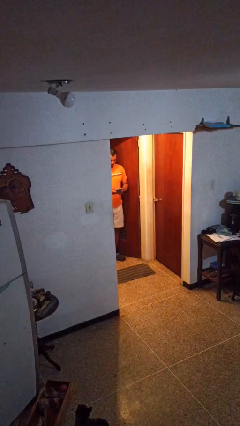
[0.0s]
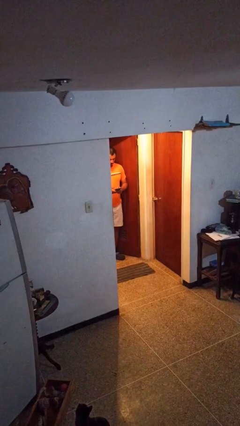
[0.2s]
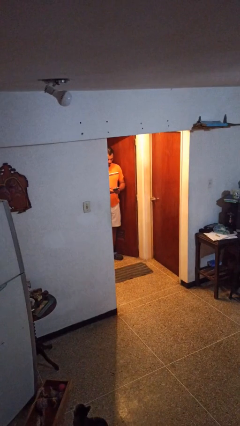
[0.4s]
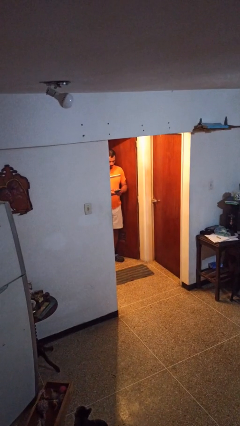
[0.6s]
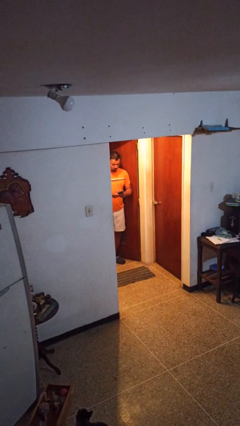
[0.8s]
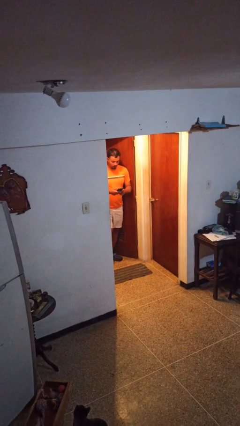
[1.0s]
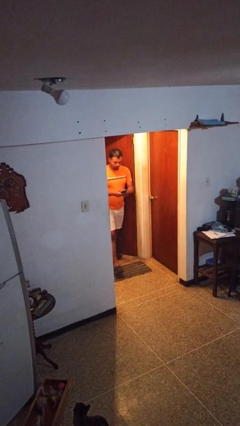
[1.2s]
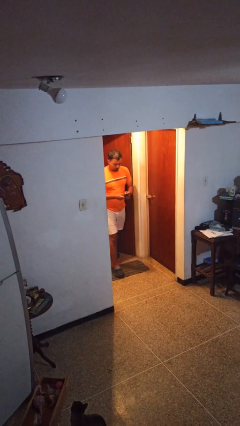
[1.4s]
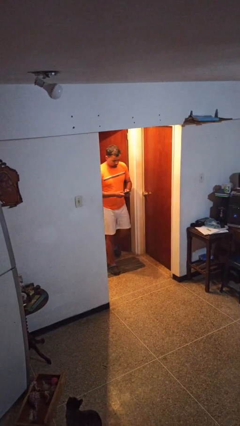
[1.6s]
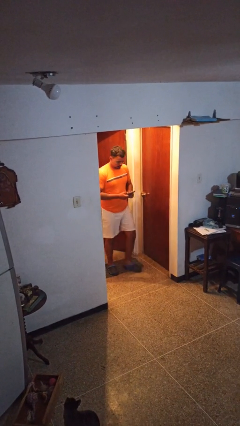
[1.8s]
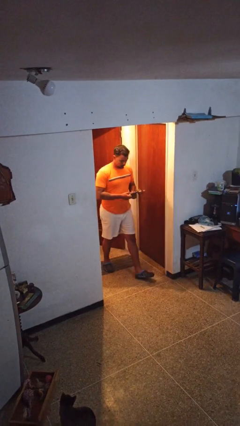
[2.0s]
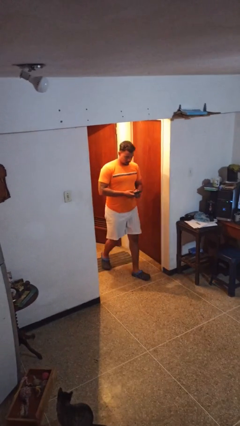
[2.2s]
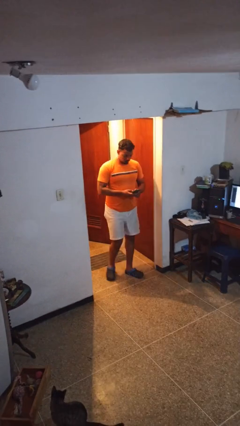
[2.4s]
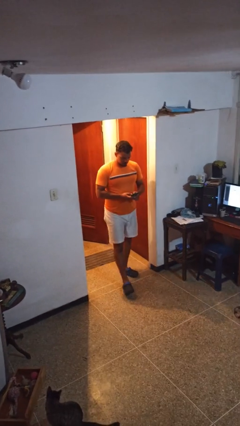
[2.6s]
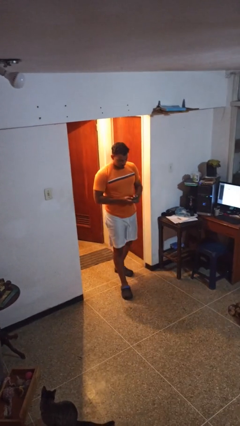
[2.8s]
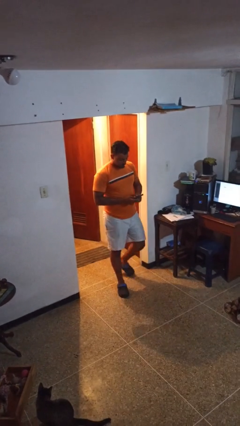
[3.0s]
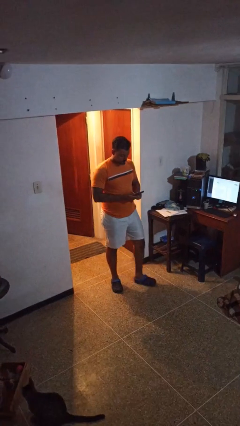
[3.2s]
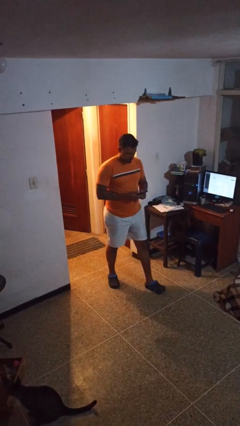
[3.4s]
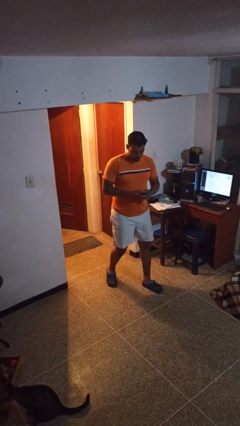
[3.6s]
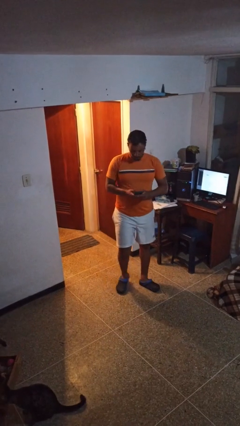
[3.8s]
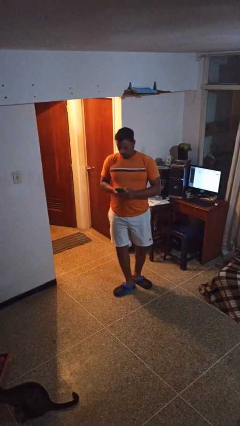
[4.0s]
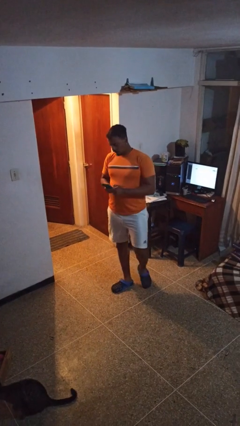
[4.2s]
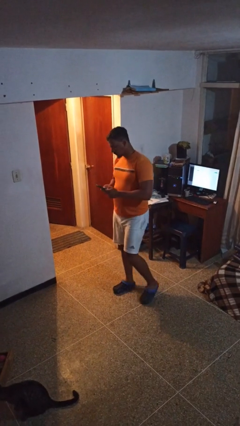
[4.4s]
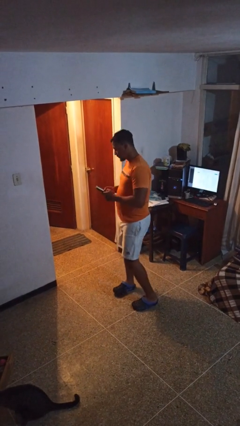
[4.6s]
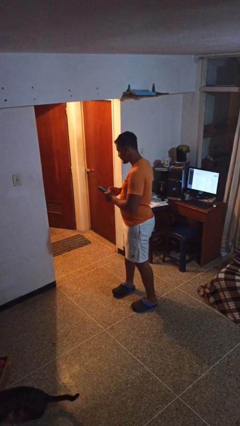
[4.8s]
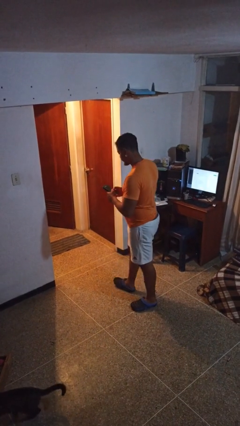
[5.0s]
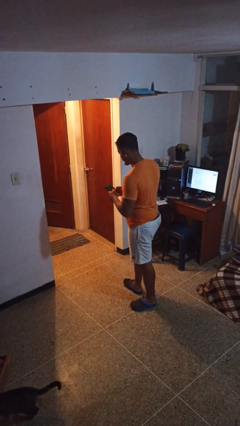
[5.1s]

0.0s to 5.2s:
person enters scene through structure

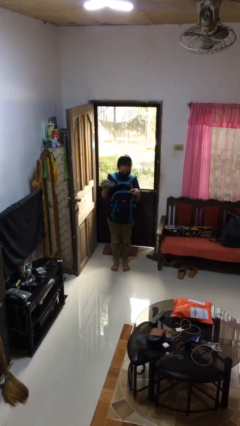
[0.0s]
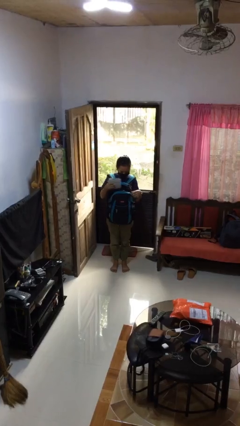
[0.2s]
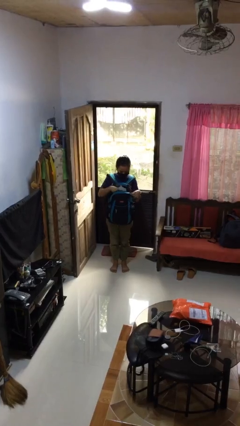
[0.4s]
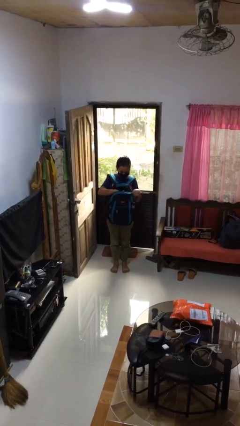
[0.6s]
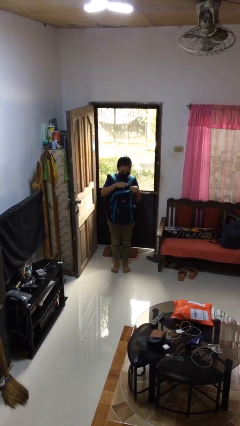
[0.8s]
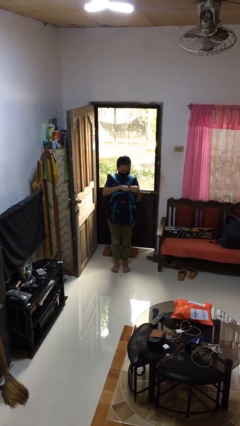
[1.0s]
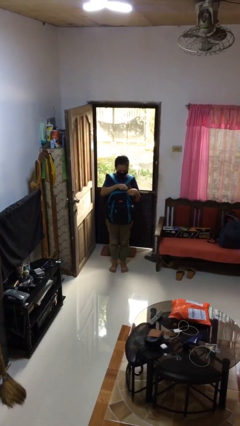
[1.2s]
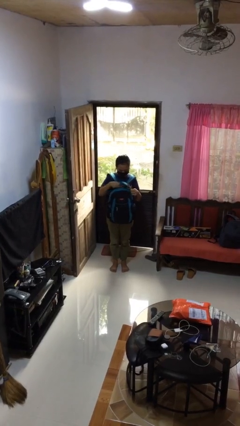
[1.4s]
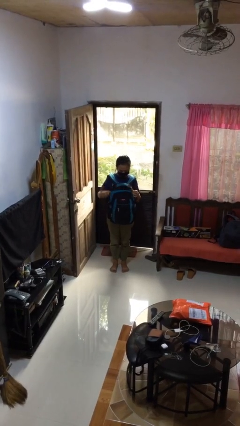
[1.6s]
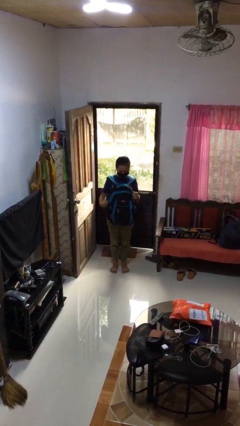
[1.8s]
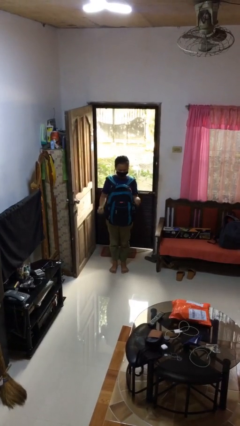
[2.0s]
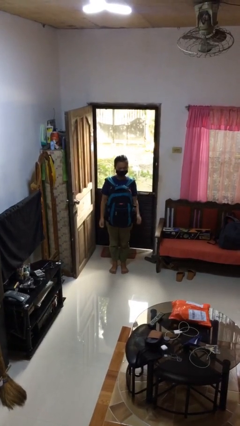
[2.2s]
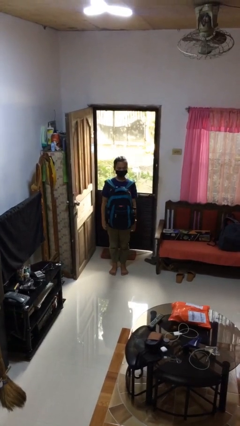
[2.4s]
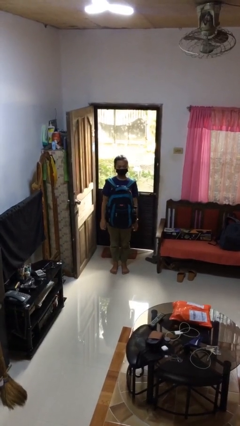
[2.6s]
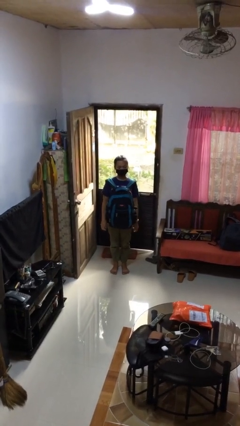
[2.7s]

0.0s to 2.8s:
person puts object into backpack

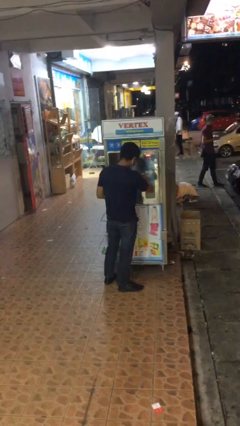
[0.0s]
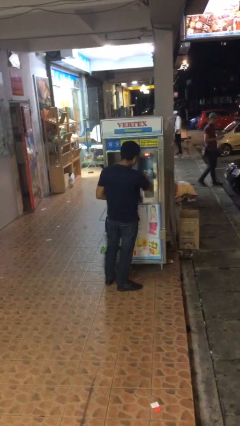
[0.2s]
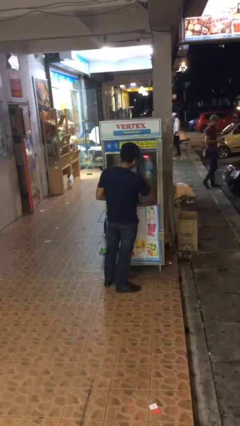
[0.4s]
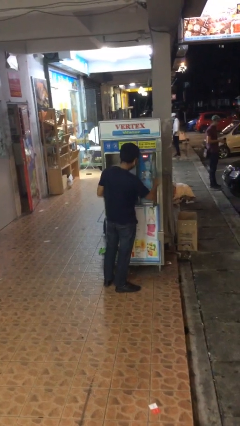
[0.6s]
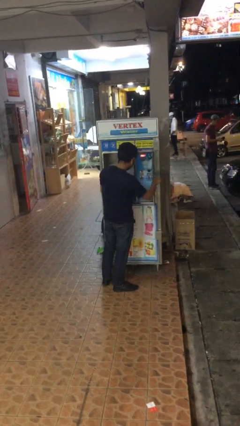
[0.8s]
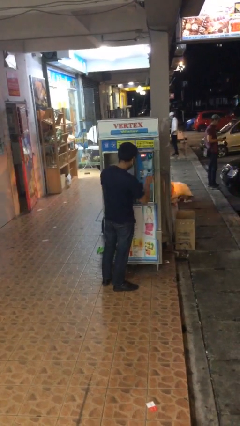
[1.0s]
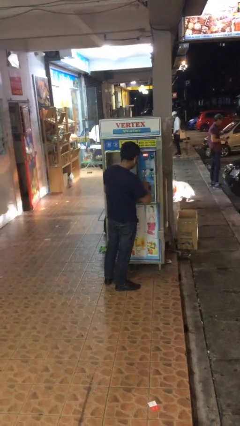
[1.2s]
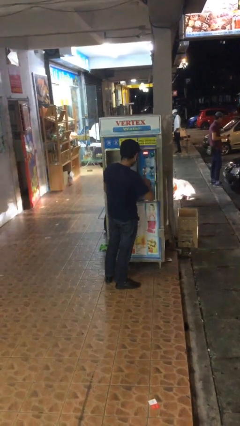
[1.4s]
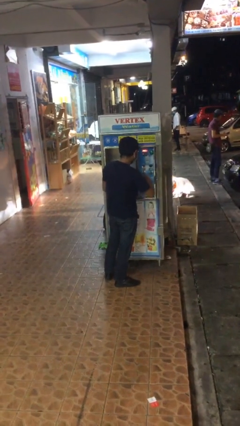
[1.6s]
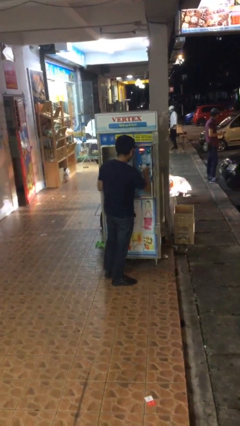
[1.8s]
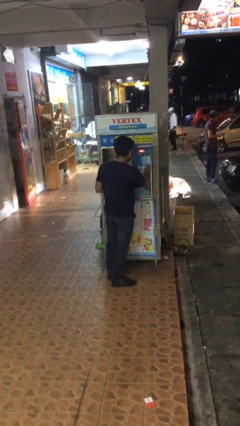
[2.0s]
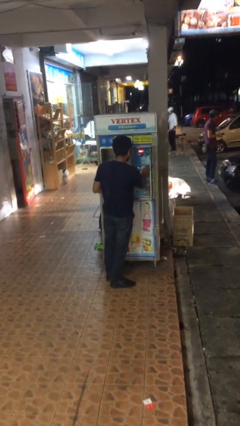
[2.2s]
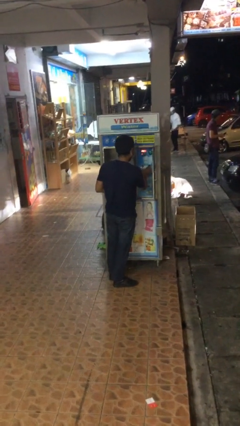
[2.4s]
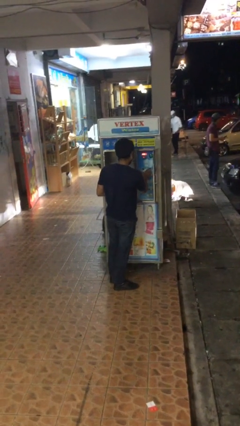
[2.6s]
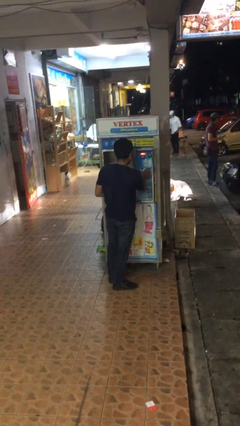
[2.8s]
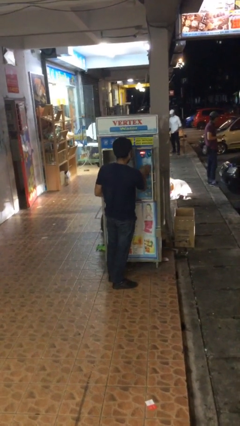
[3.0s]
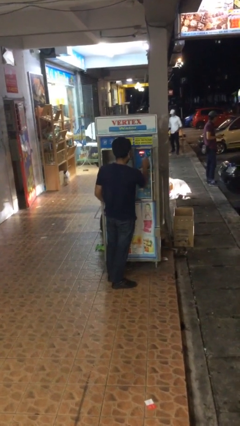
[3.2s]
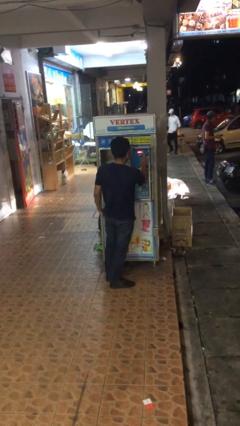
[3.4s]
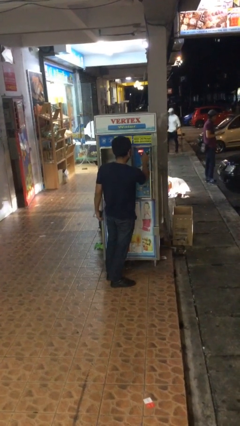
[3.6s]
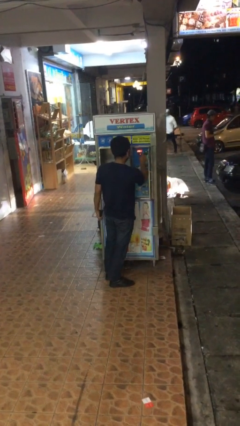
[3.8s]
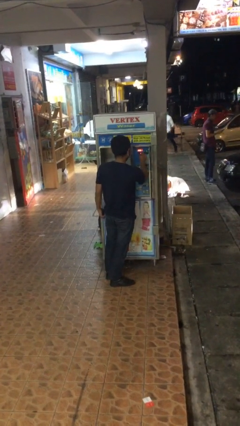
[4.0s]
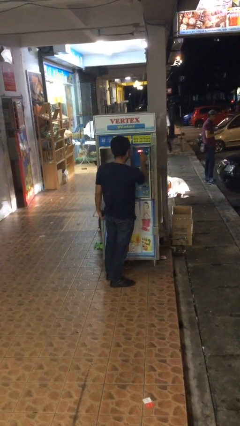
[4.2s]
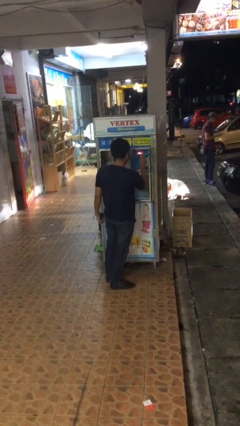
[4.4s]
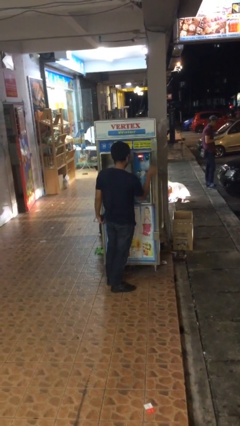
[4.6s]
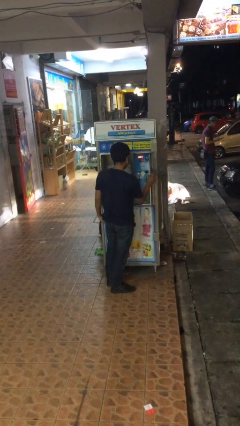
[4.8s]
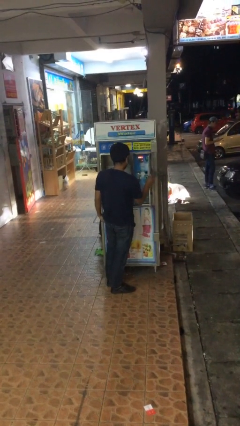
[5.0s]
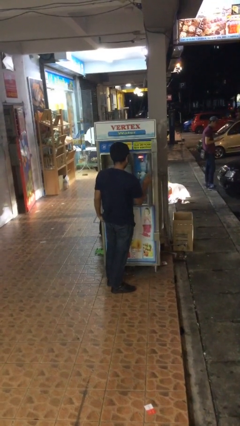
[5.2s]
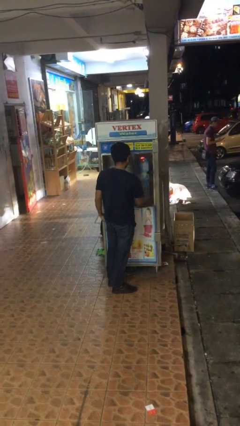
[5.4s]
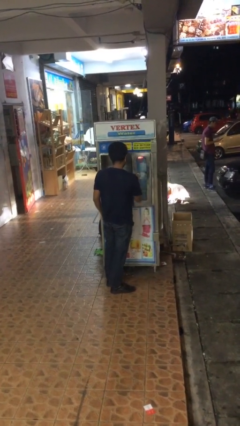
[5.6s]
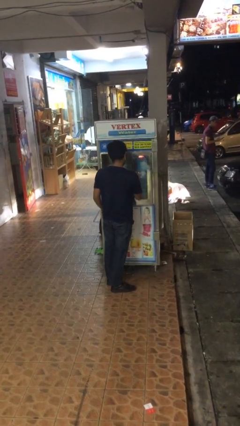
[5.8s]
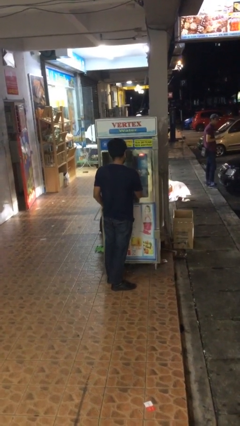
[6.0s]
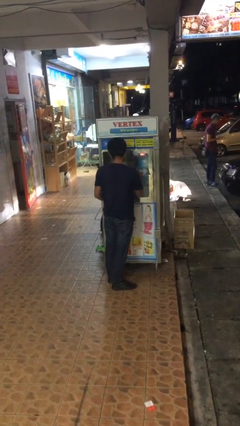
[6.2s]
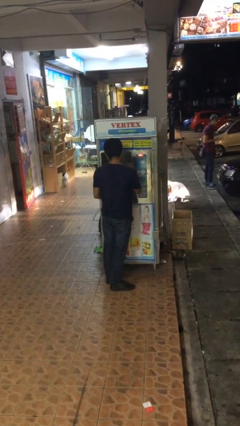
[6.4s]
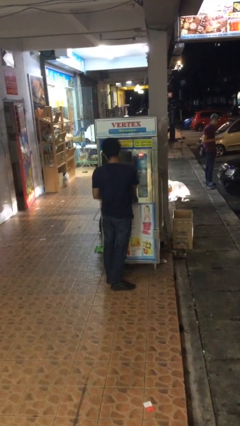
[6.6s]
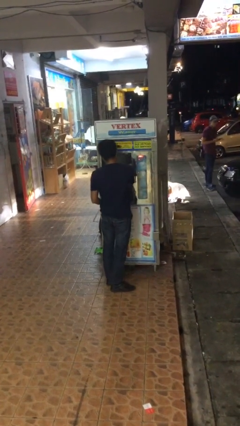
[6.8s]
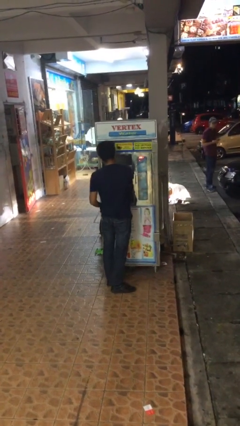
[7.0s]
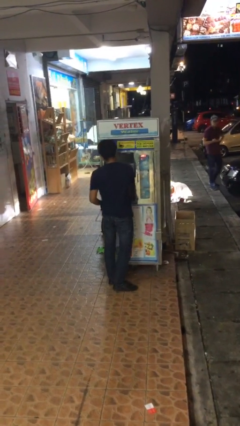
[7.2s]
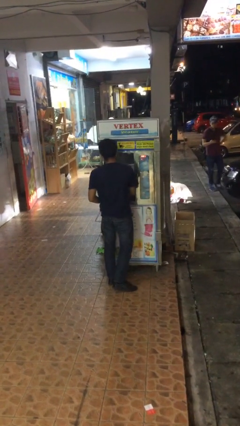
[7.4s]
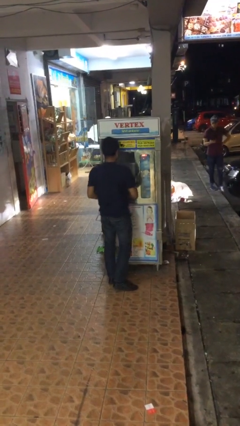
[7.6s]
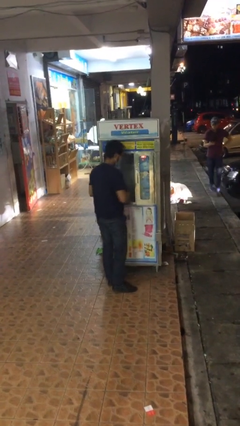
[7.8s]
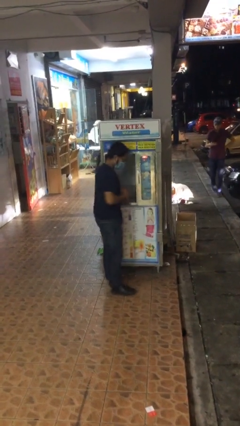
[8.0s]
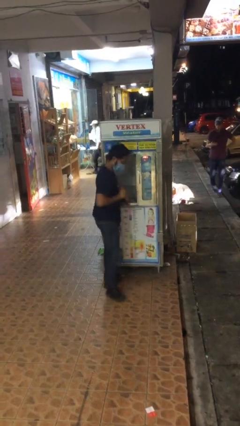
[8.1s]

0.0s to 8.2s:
person purchases from machine

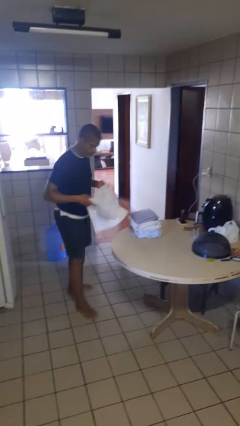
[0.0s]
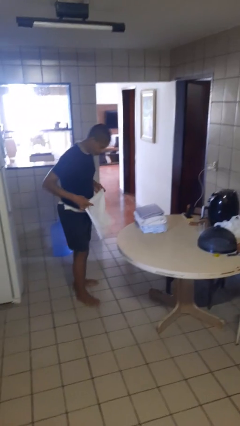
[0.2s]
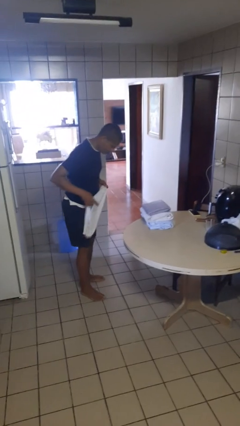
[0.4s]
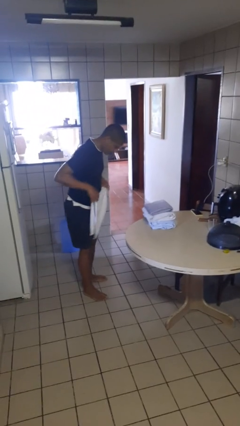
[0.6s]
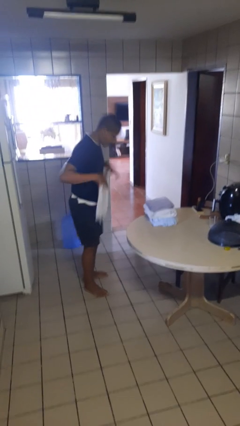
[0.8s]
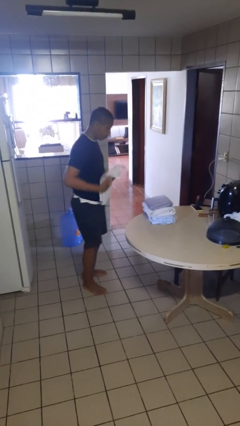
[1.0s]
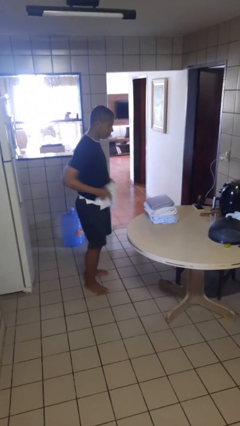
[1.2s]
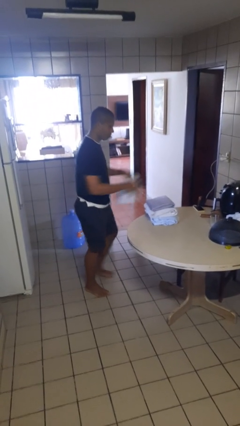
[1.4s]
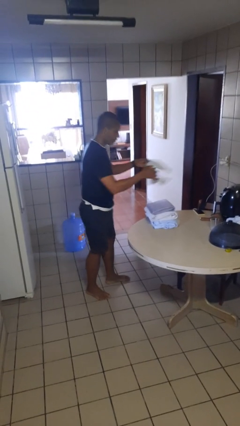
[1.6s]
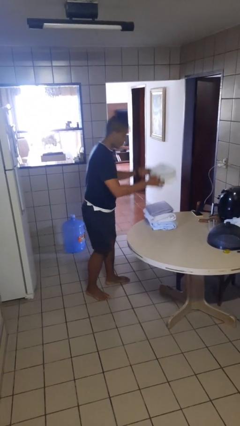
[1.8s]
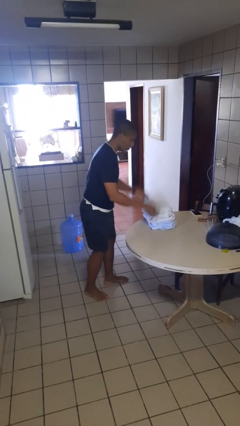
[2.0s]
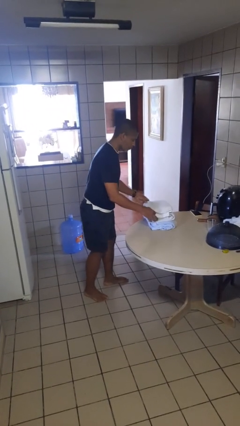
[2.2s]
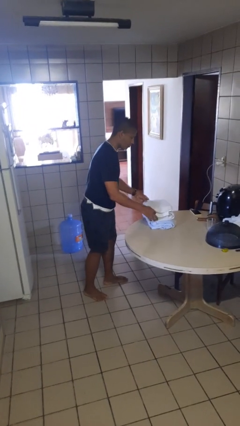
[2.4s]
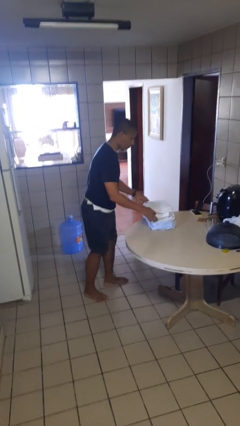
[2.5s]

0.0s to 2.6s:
person folds towel
